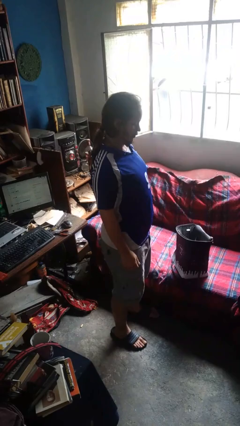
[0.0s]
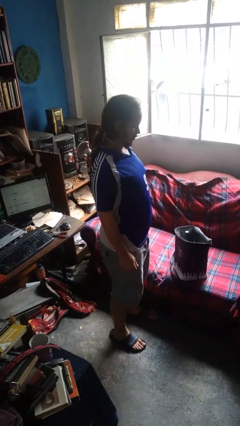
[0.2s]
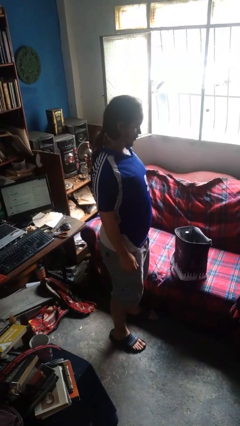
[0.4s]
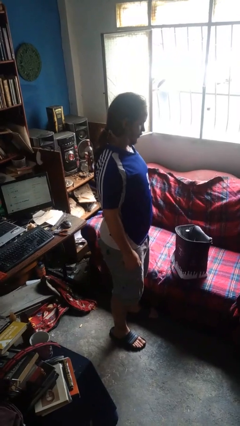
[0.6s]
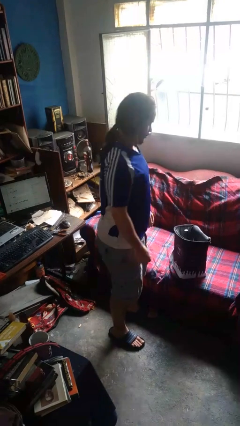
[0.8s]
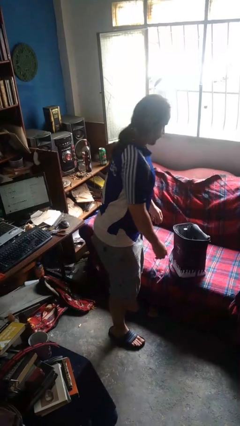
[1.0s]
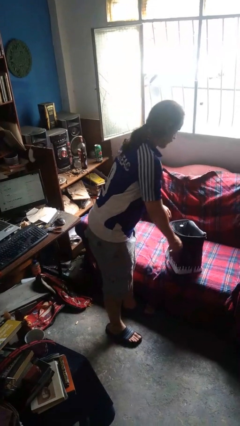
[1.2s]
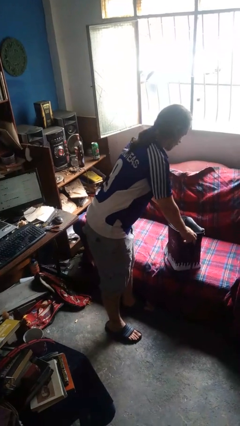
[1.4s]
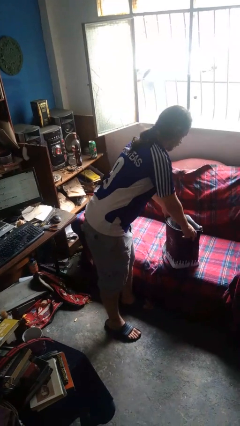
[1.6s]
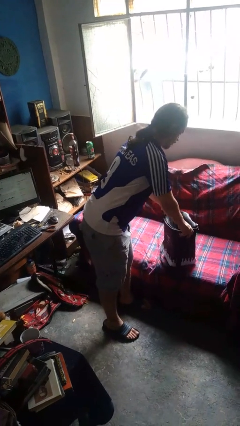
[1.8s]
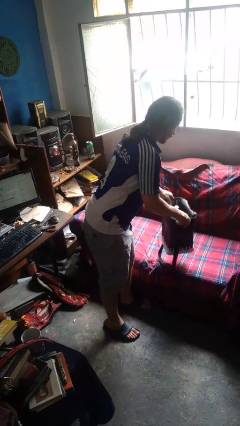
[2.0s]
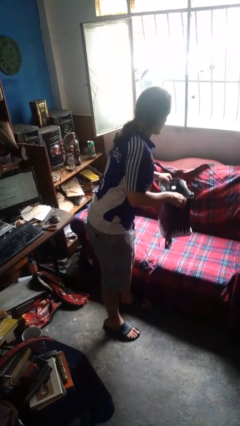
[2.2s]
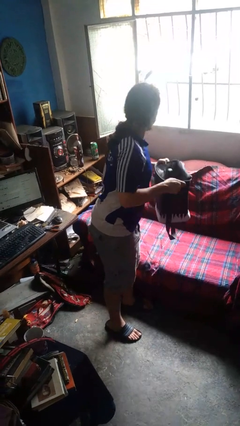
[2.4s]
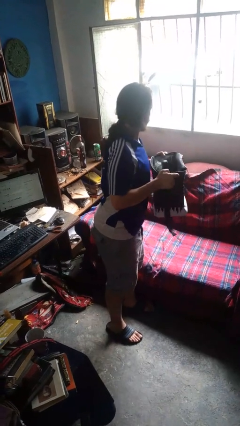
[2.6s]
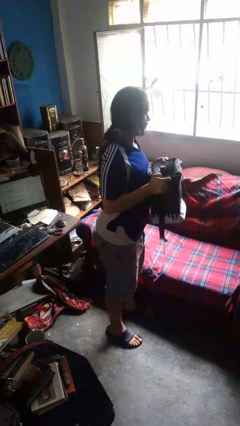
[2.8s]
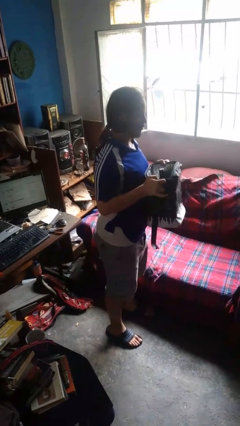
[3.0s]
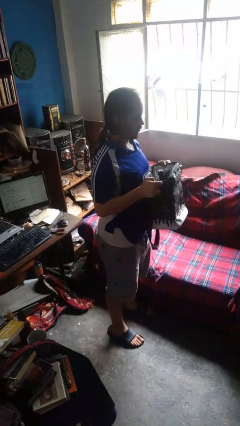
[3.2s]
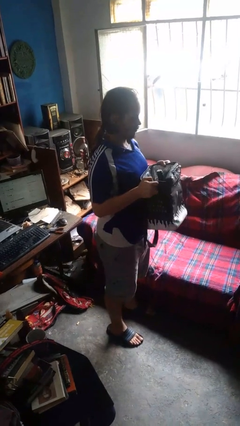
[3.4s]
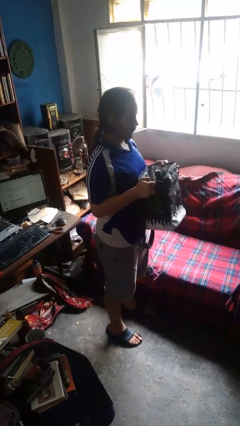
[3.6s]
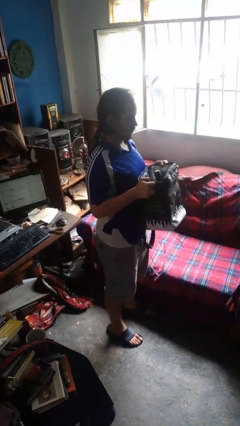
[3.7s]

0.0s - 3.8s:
person picks up object from couch

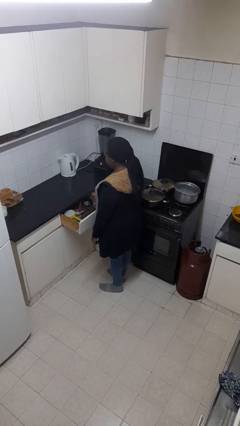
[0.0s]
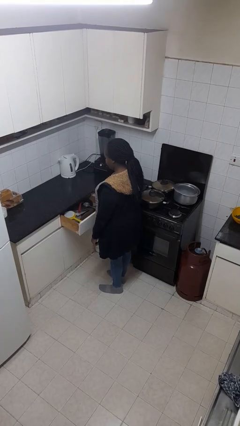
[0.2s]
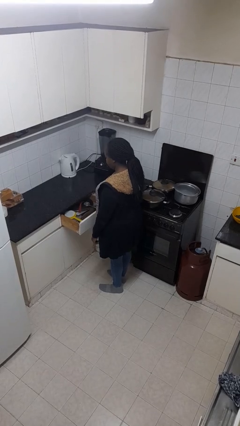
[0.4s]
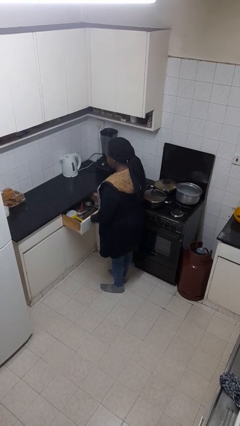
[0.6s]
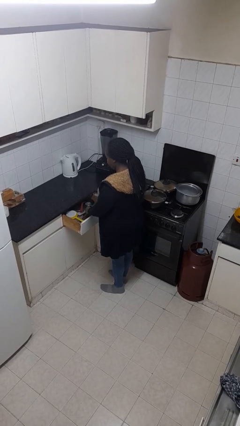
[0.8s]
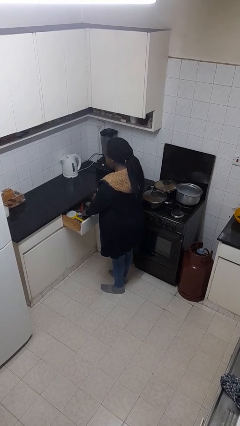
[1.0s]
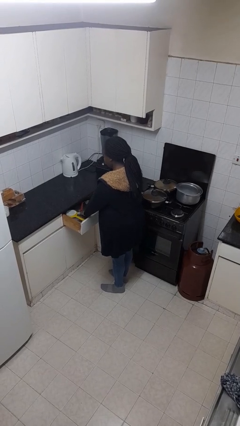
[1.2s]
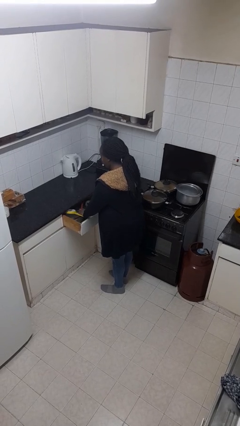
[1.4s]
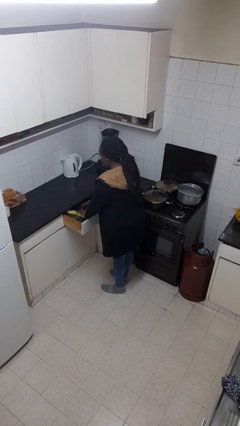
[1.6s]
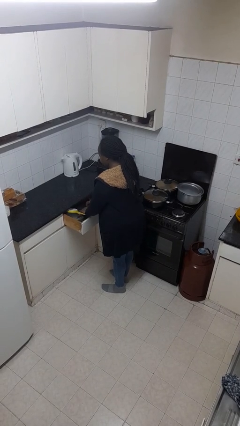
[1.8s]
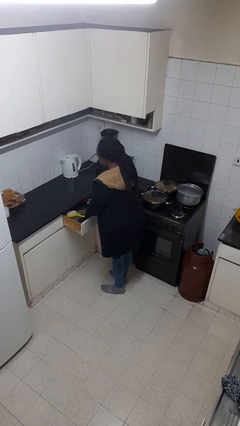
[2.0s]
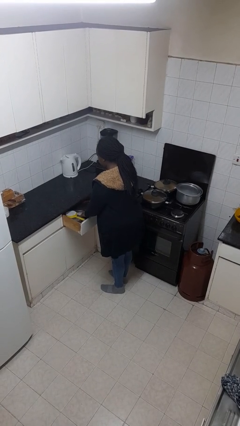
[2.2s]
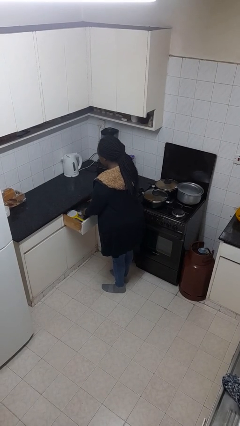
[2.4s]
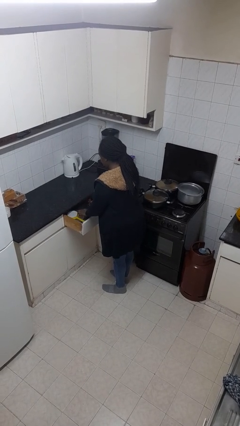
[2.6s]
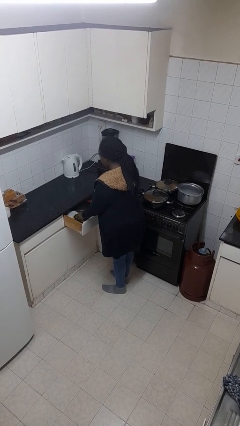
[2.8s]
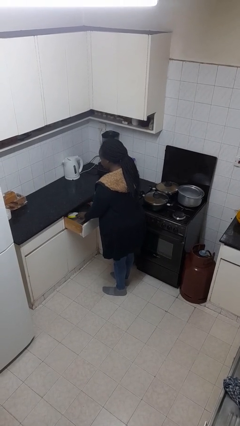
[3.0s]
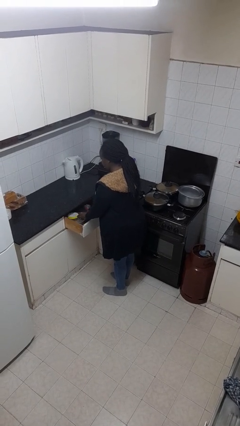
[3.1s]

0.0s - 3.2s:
person searches in kitchen drawer

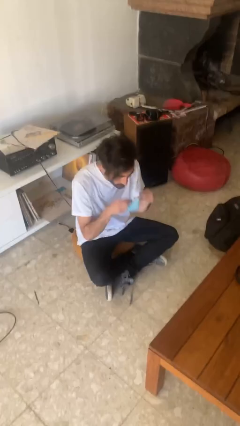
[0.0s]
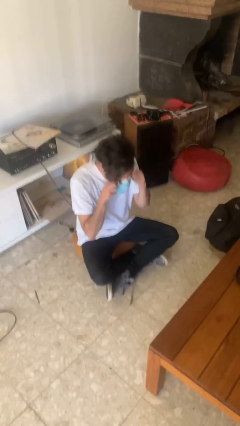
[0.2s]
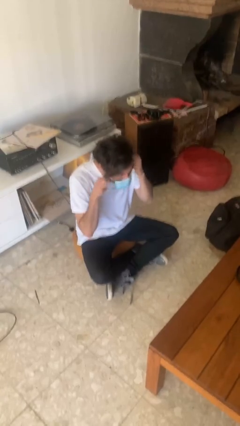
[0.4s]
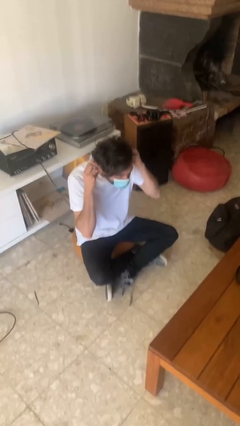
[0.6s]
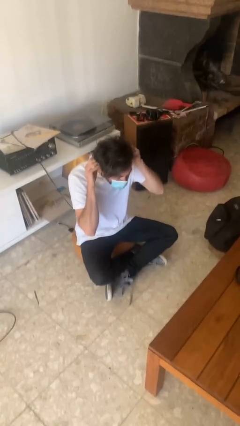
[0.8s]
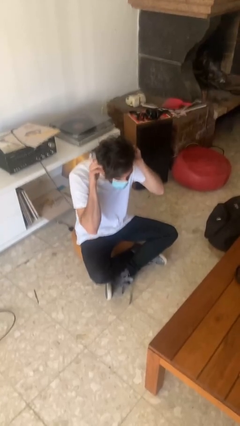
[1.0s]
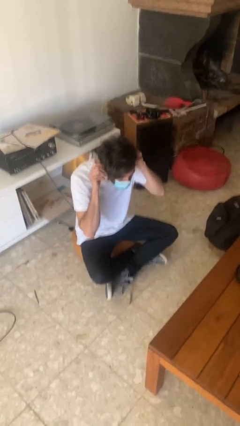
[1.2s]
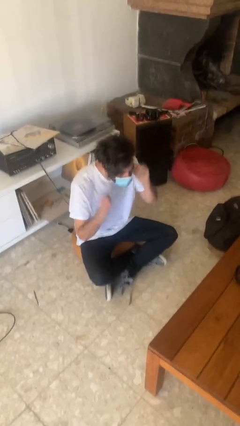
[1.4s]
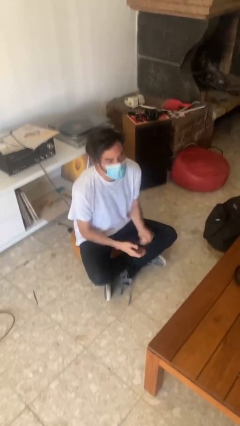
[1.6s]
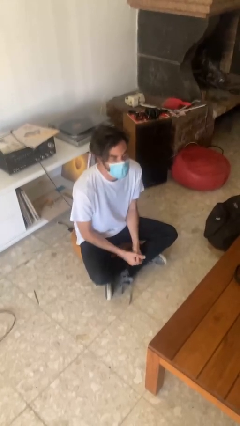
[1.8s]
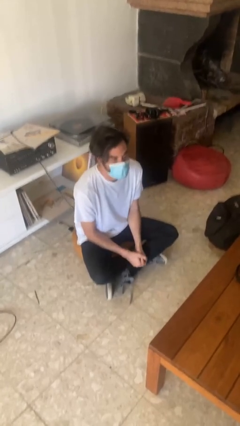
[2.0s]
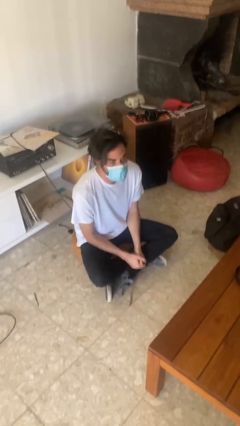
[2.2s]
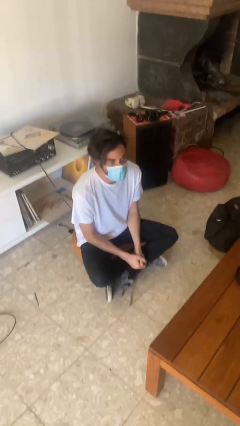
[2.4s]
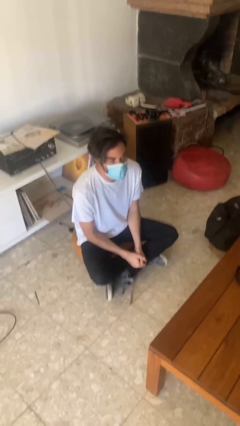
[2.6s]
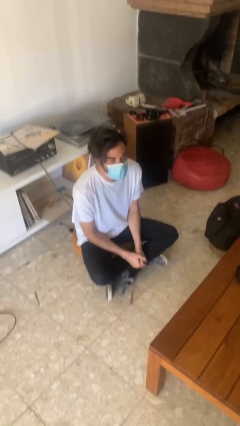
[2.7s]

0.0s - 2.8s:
person puts on facemask

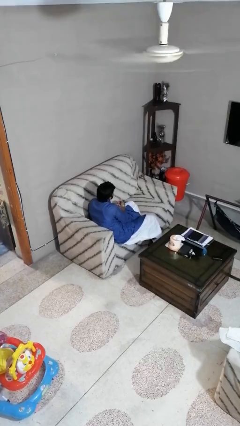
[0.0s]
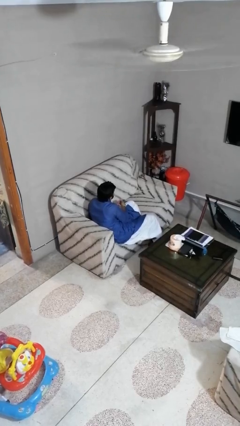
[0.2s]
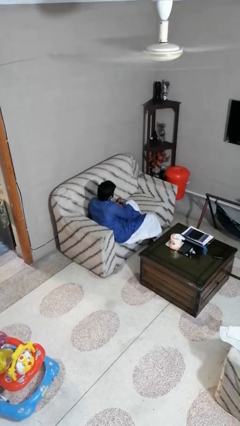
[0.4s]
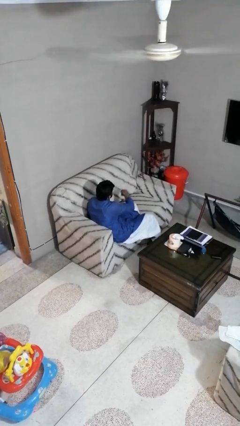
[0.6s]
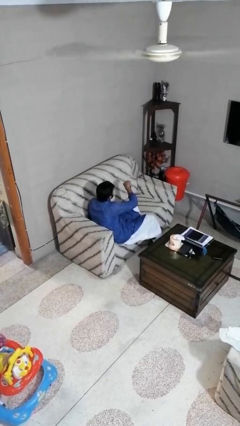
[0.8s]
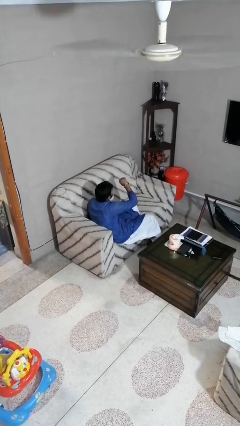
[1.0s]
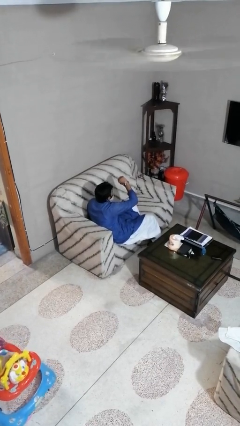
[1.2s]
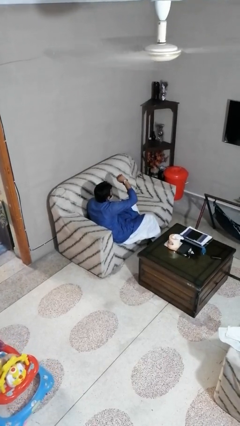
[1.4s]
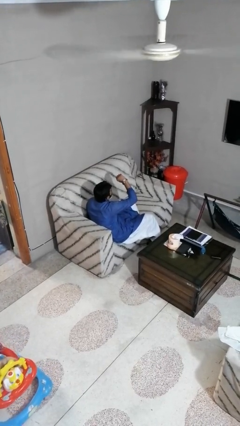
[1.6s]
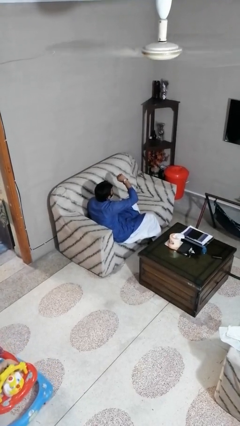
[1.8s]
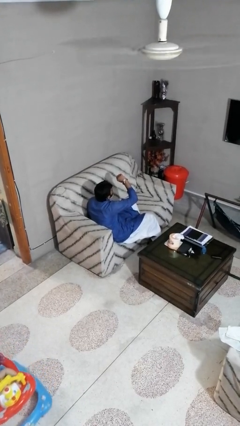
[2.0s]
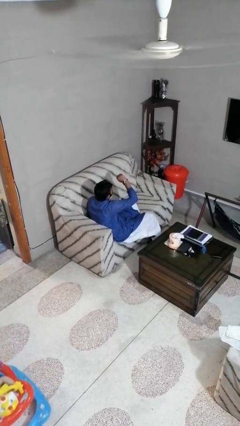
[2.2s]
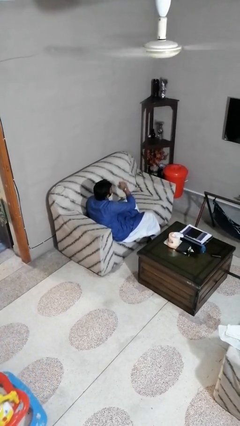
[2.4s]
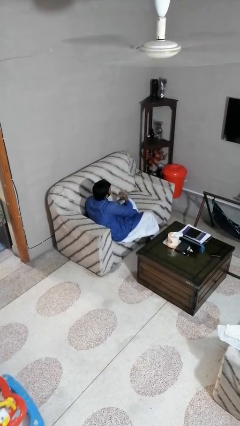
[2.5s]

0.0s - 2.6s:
person looks at wristwatch

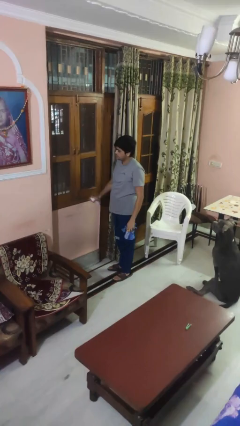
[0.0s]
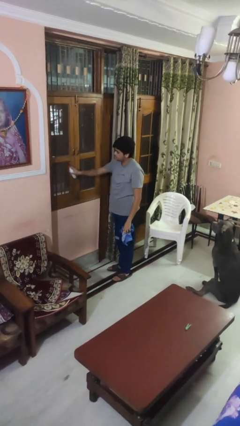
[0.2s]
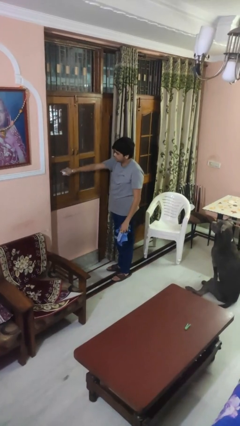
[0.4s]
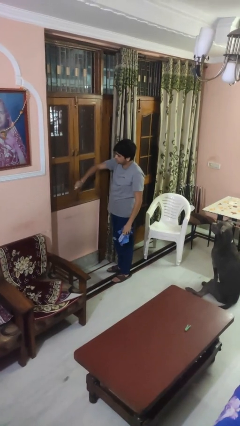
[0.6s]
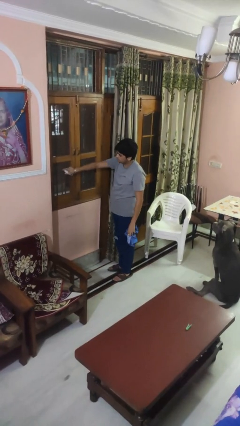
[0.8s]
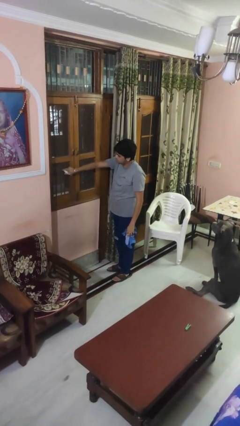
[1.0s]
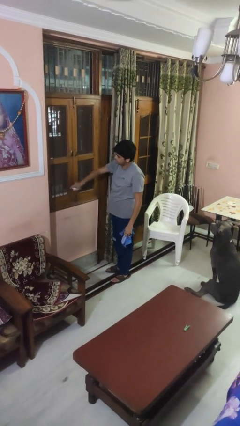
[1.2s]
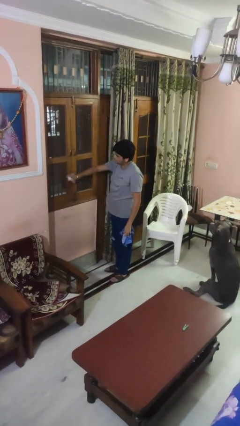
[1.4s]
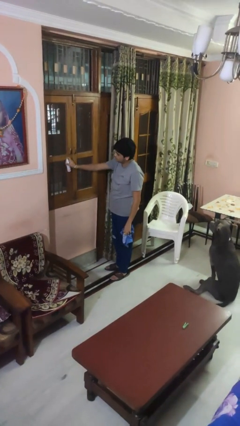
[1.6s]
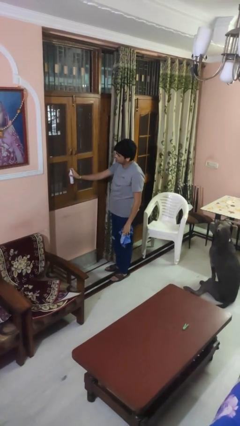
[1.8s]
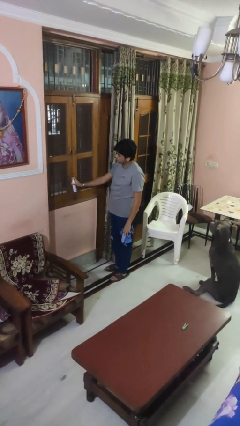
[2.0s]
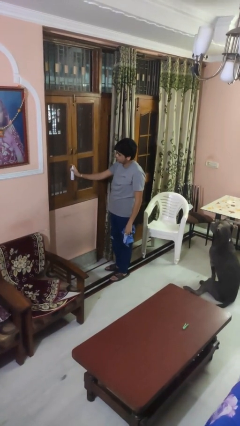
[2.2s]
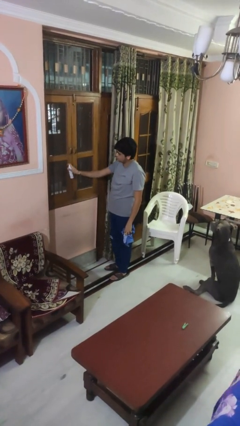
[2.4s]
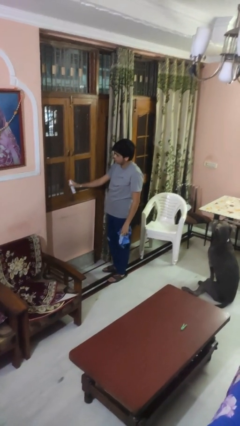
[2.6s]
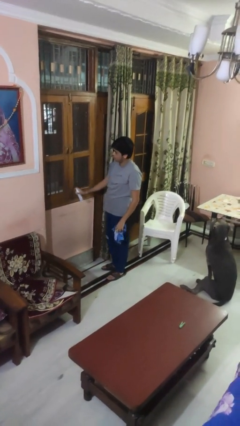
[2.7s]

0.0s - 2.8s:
person sprays from bottle

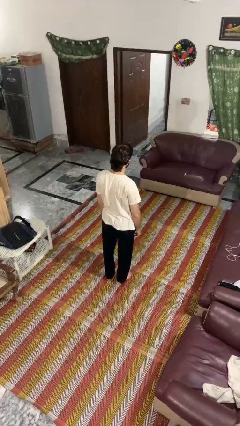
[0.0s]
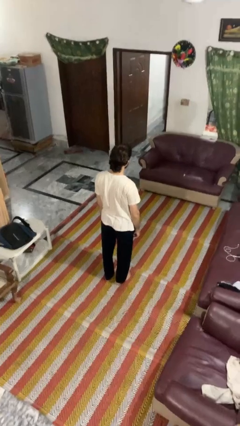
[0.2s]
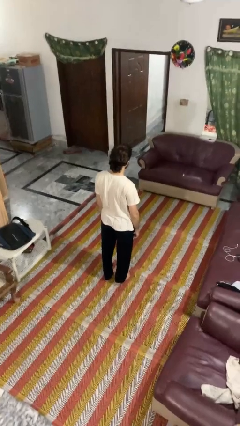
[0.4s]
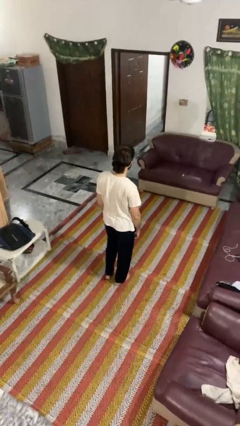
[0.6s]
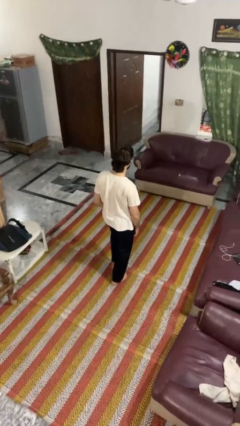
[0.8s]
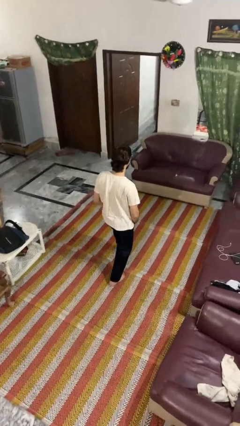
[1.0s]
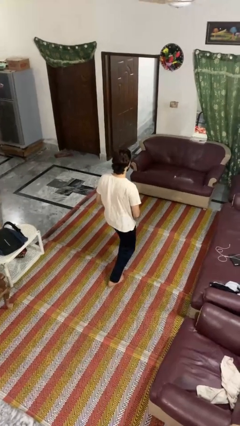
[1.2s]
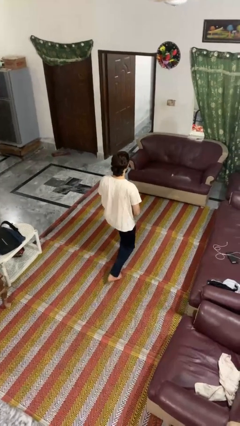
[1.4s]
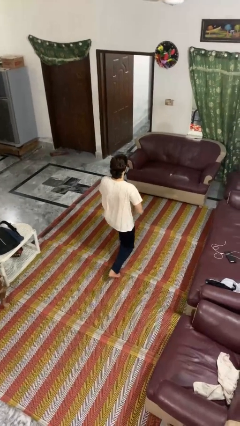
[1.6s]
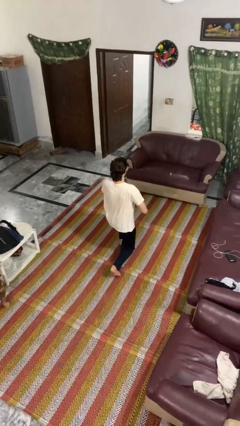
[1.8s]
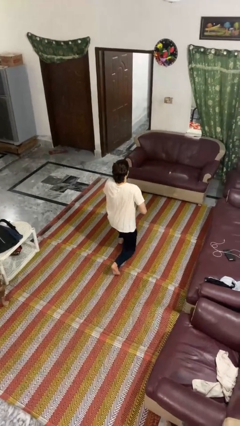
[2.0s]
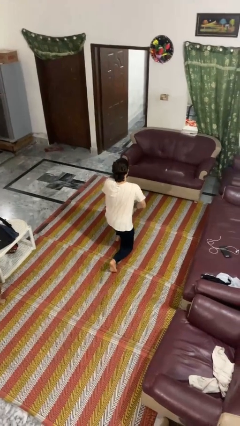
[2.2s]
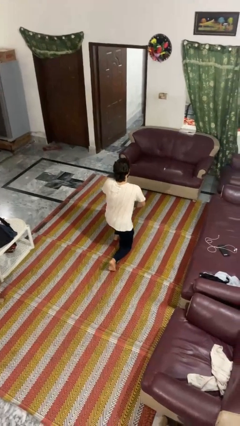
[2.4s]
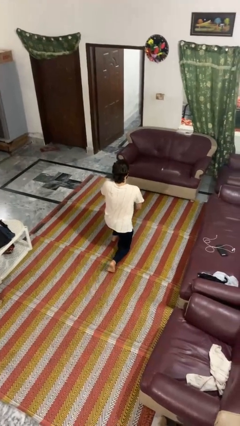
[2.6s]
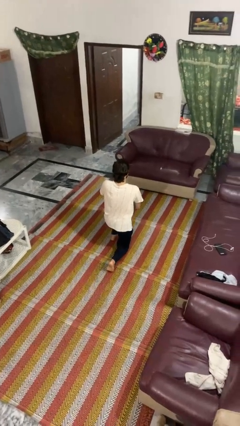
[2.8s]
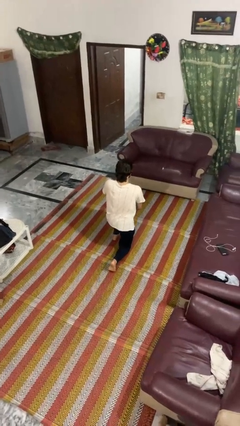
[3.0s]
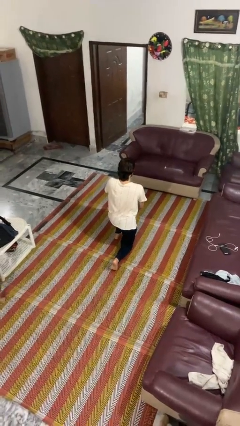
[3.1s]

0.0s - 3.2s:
person kneels
